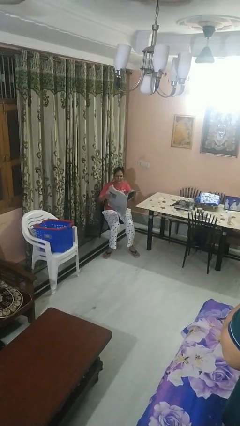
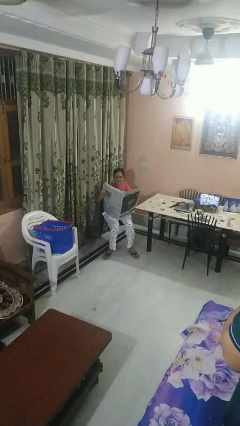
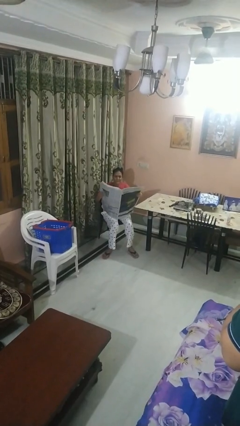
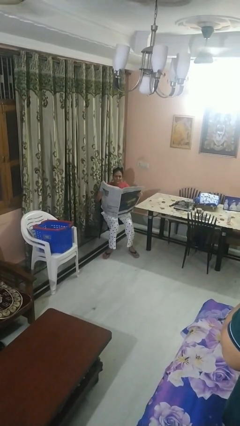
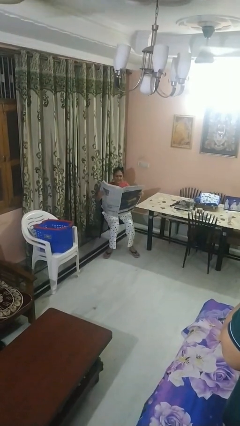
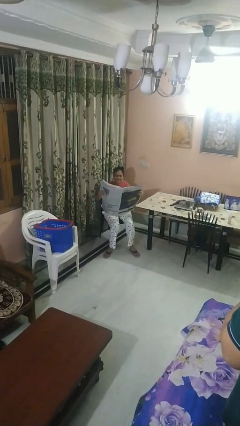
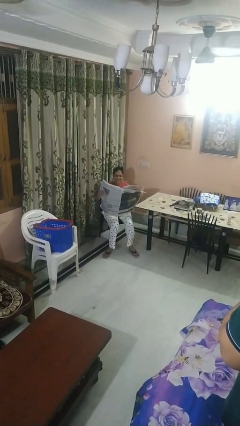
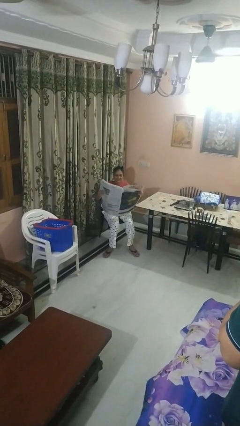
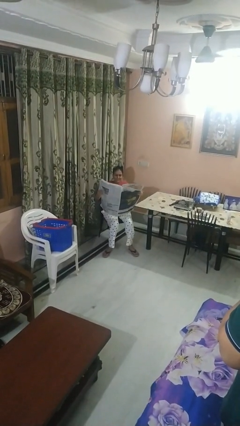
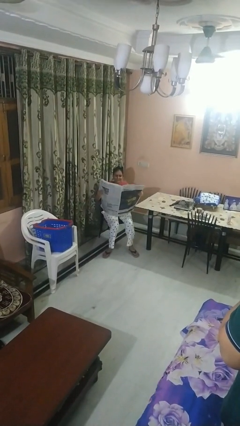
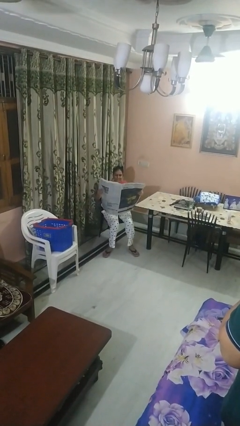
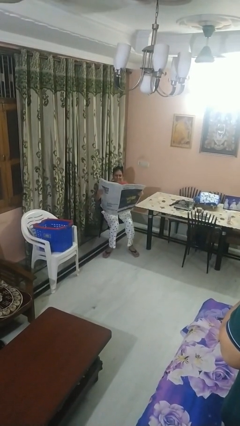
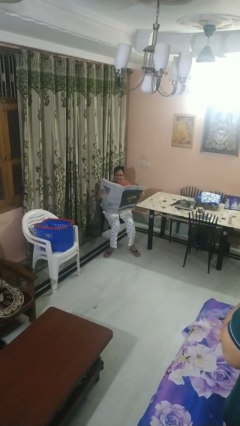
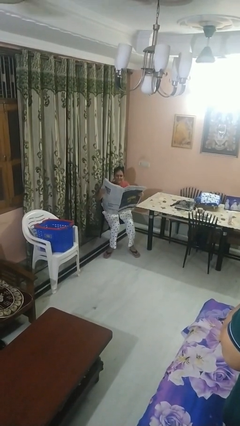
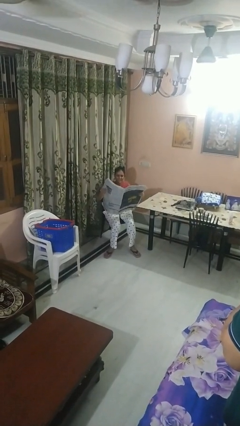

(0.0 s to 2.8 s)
person reads newspaper

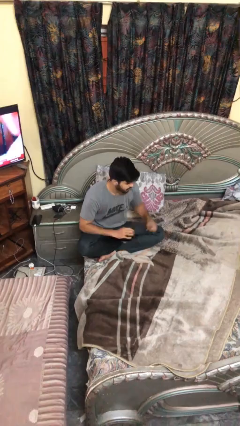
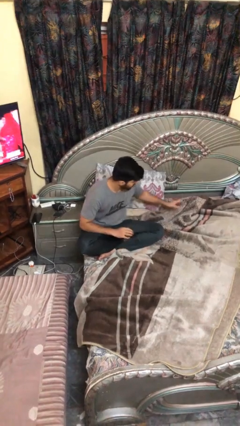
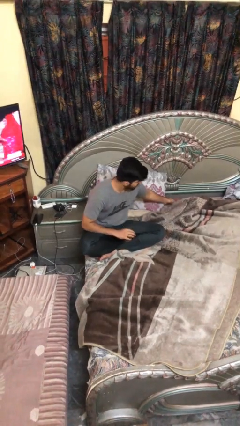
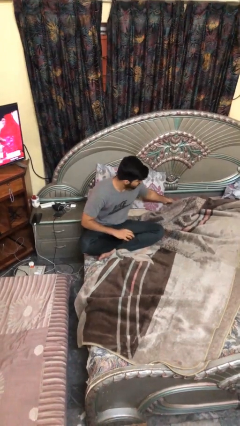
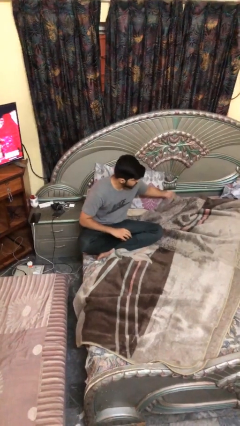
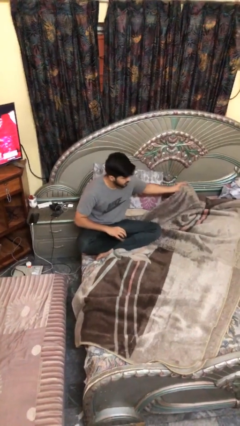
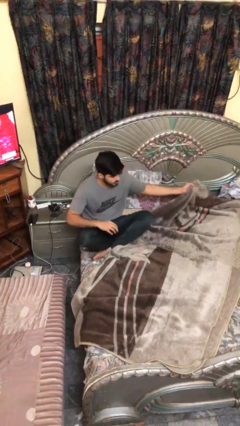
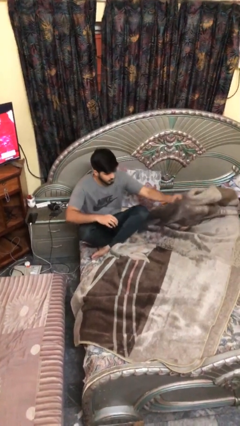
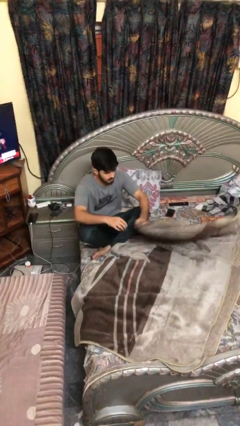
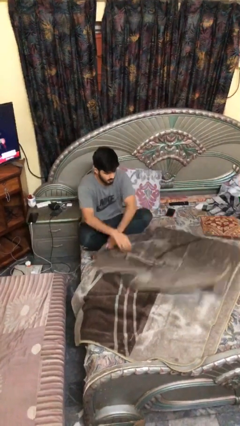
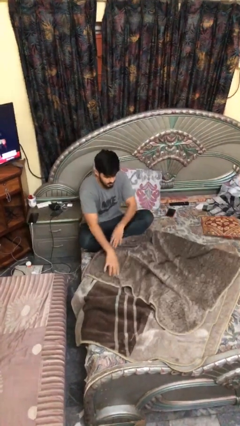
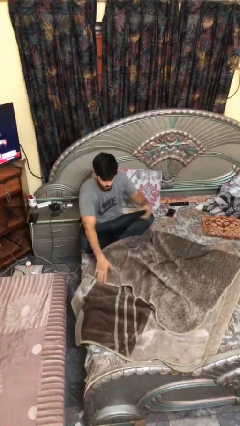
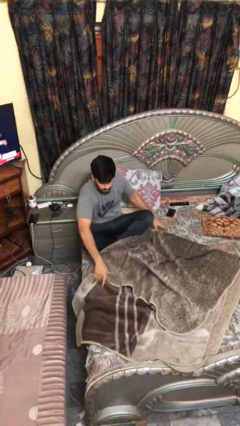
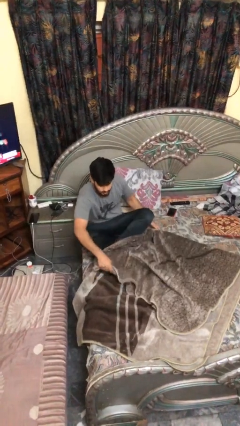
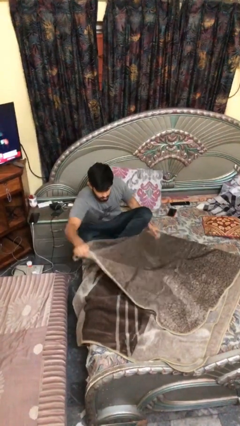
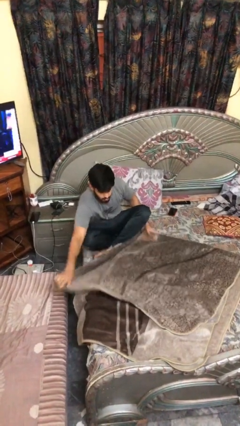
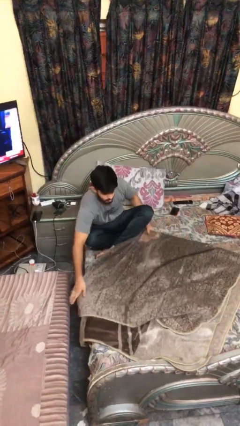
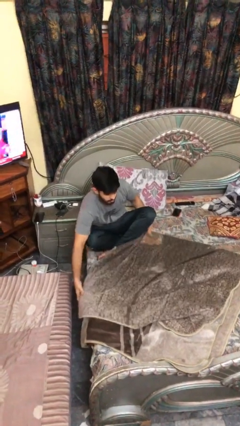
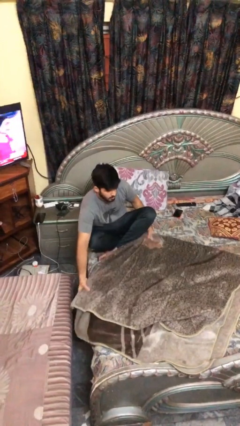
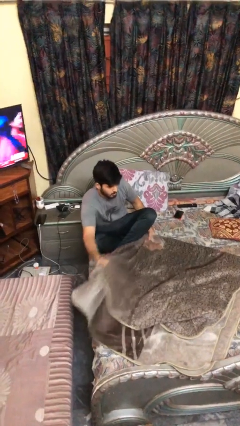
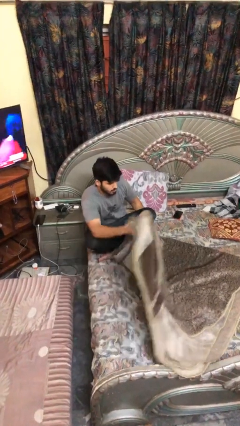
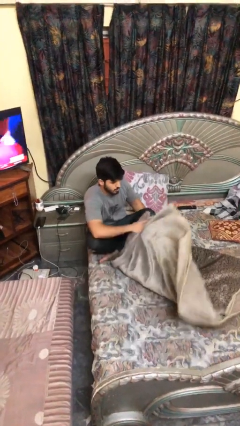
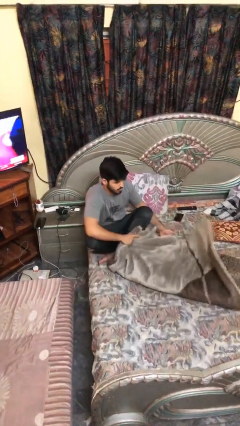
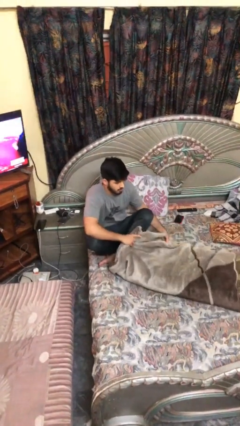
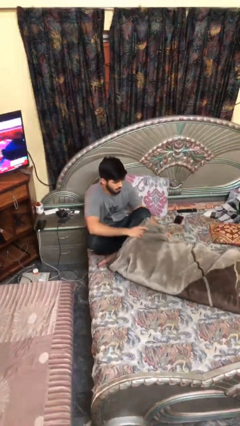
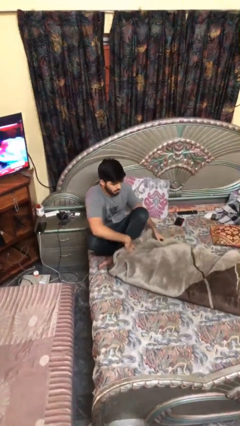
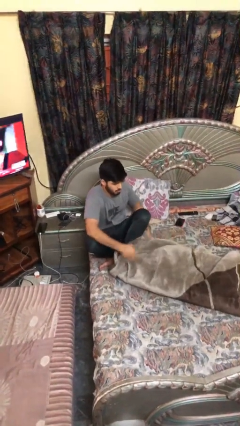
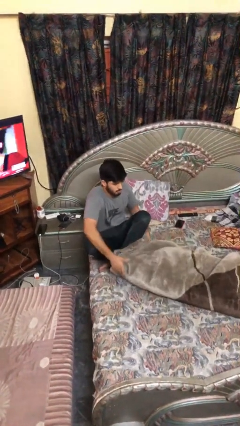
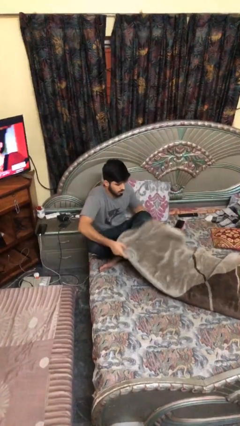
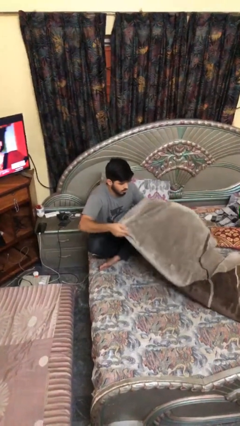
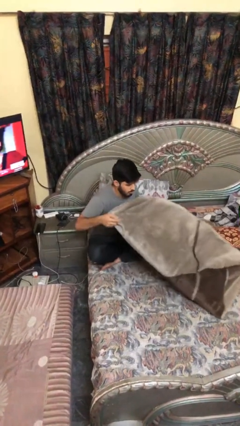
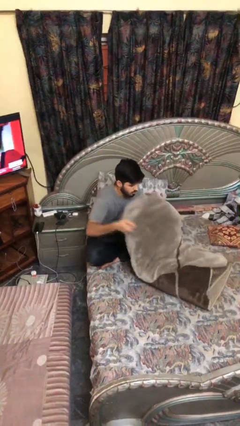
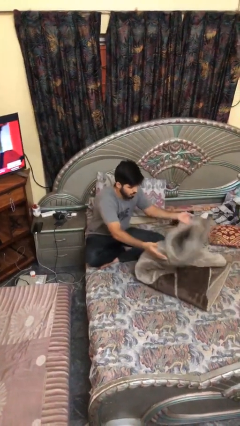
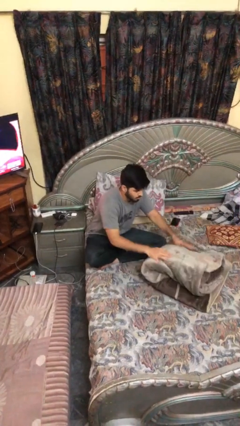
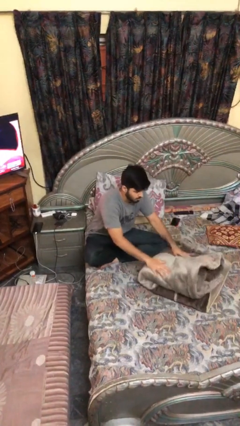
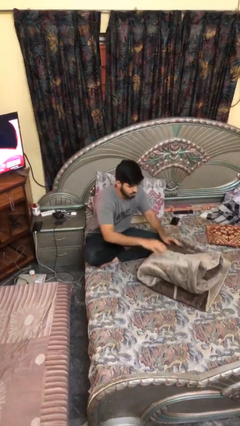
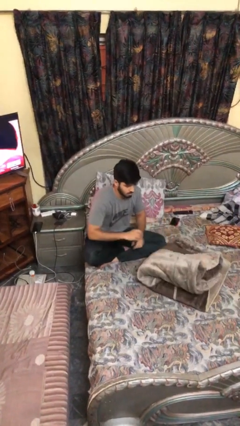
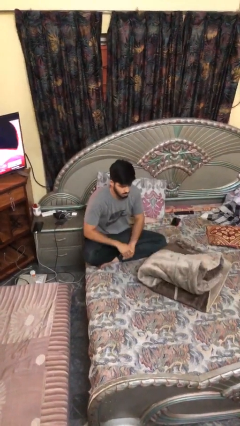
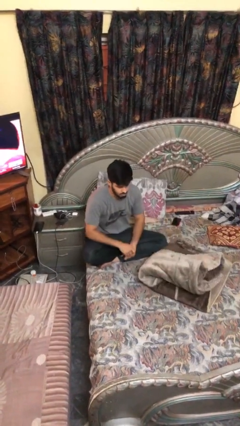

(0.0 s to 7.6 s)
person folds blanket

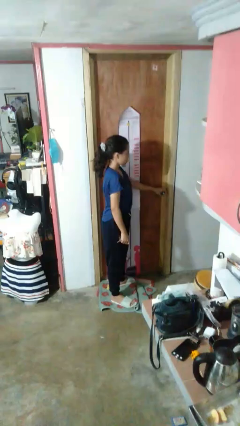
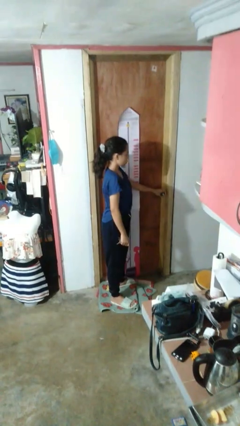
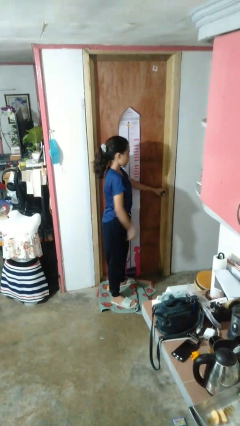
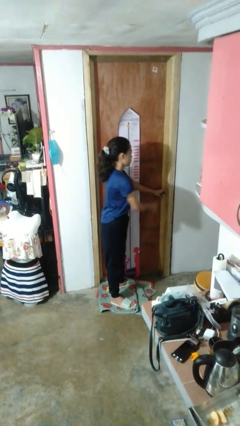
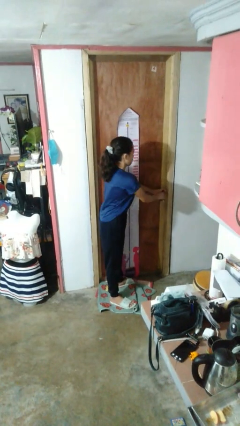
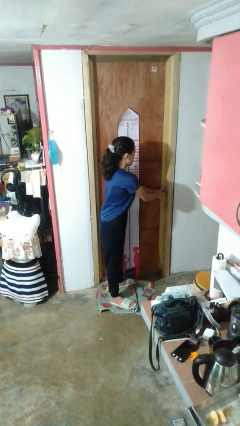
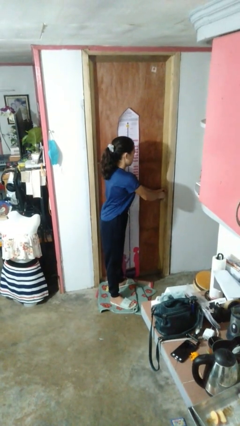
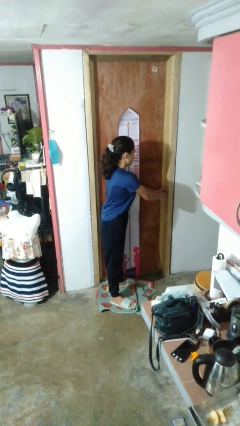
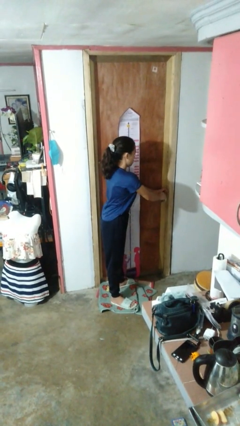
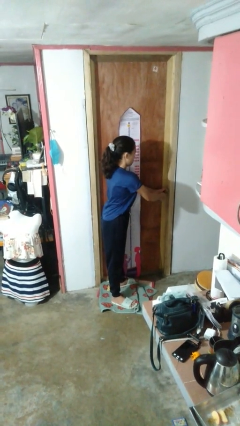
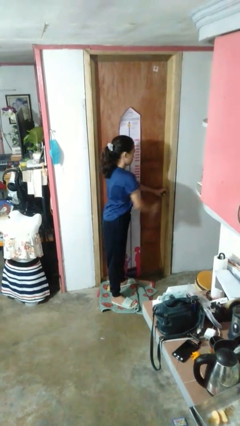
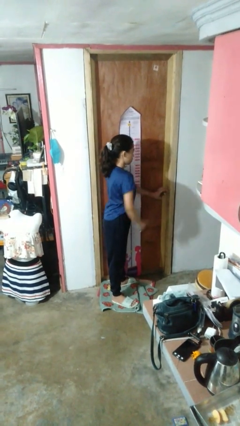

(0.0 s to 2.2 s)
person locks door with keys

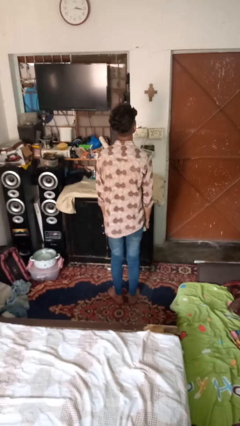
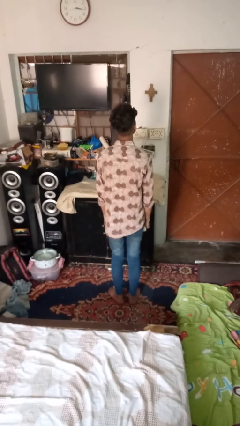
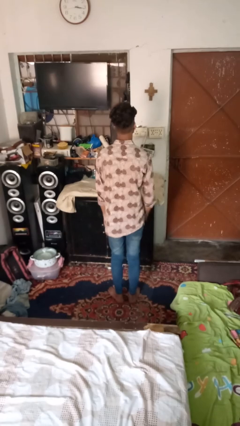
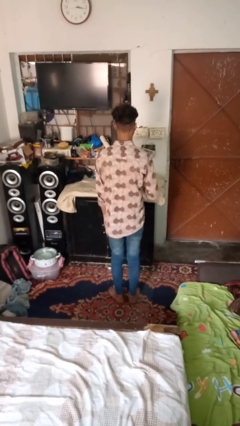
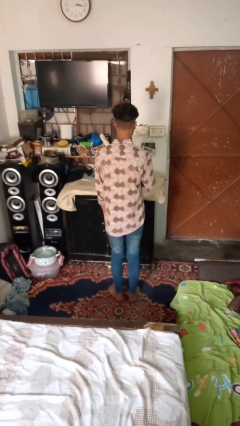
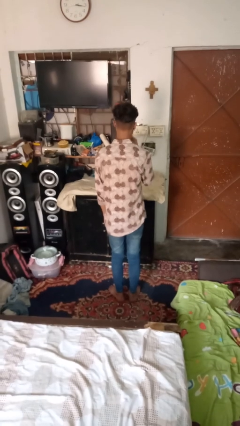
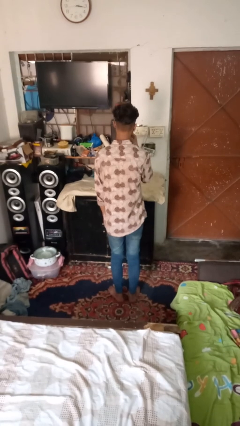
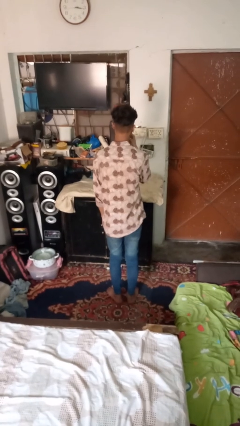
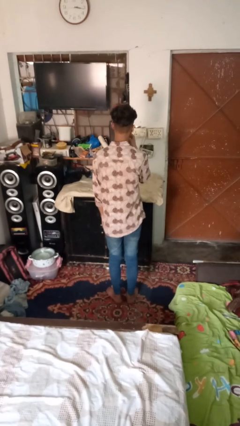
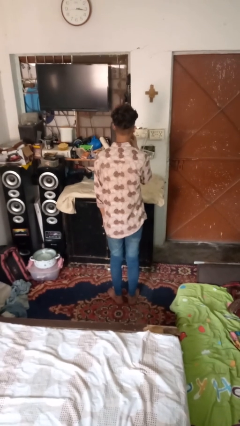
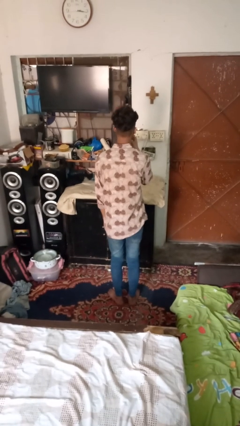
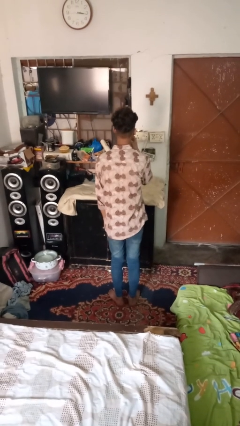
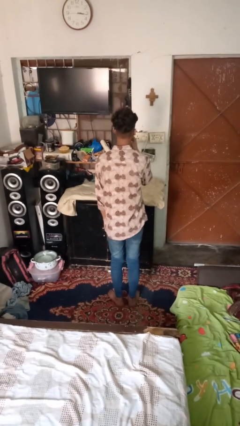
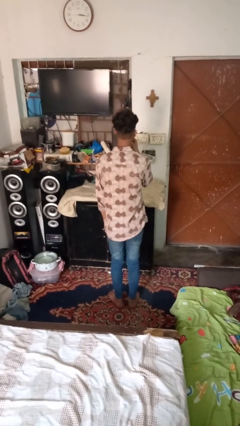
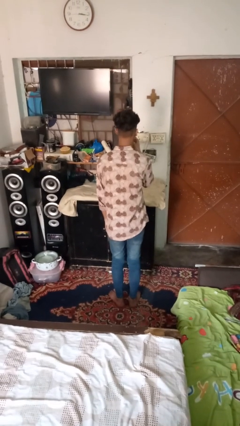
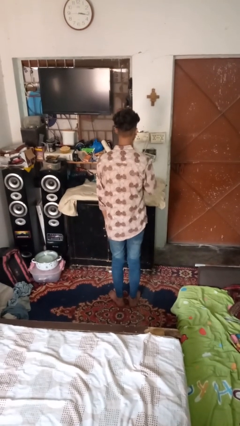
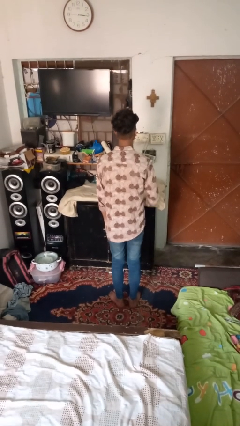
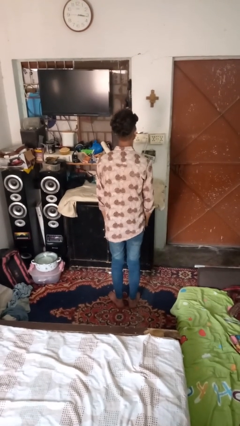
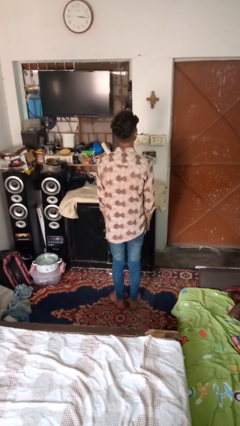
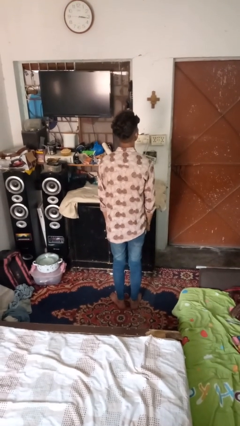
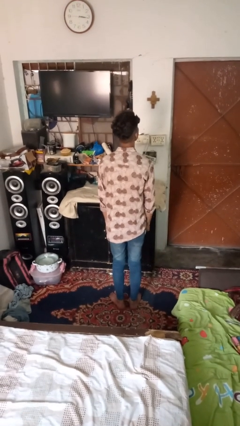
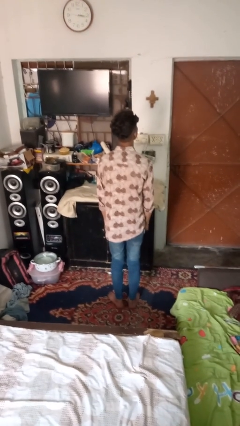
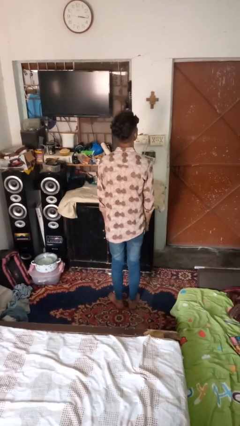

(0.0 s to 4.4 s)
person vapes

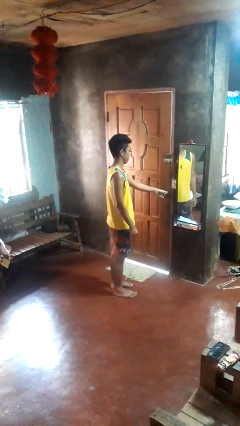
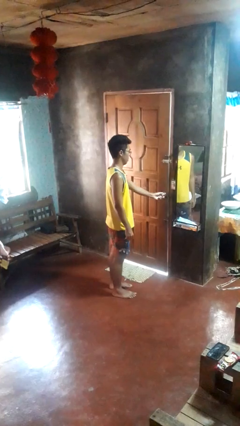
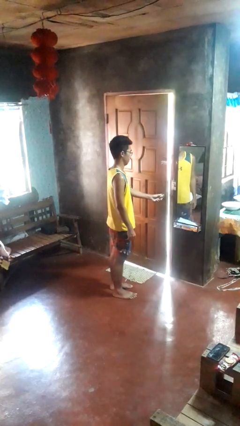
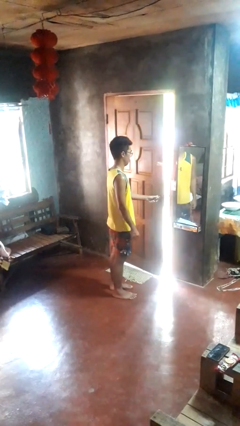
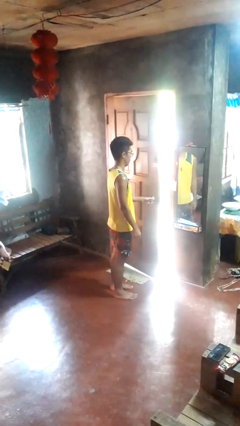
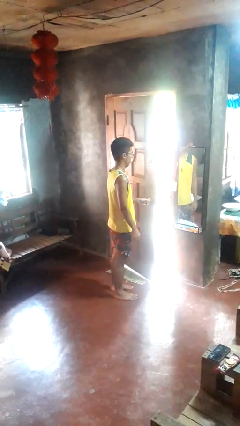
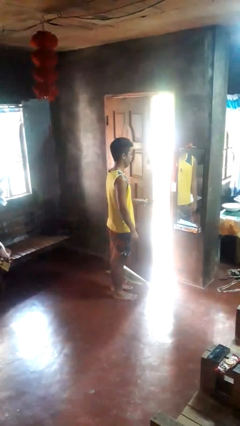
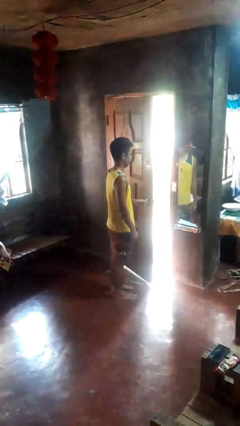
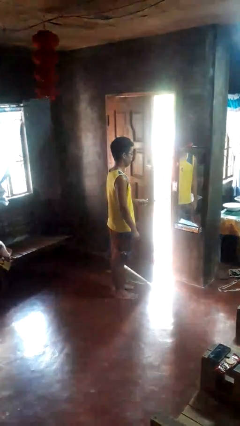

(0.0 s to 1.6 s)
person opens facility door
